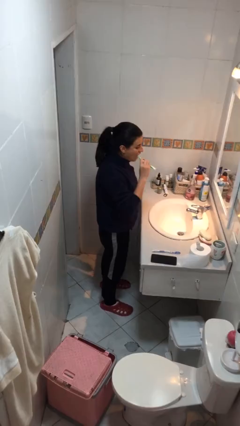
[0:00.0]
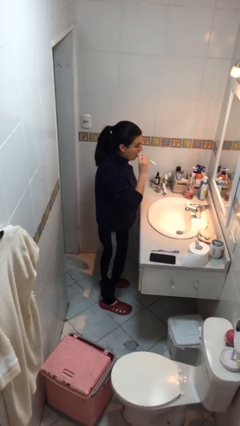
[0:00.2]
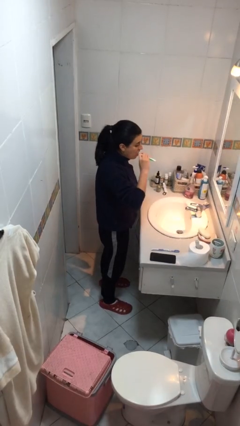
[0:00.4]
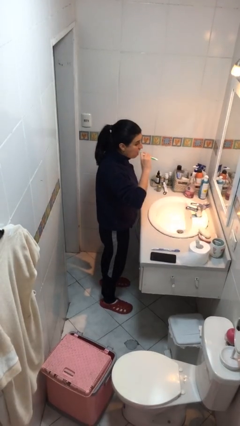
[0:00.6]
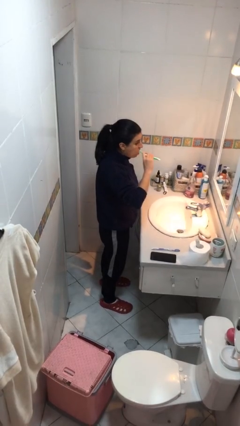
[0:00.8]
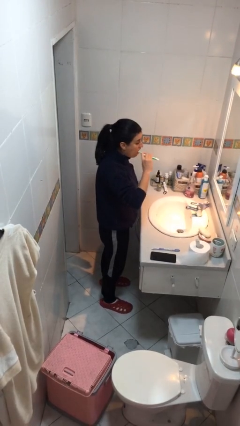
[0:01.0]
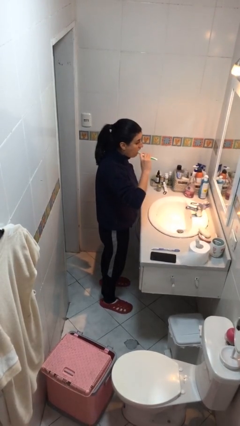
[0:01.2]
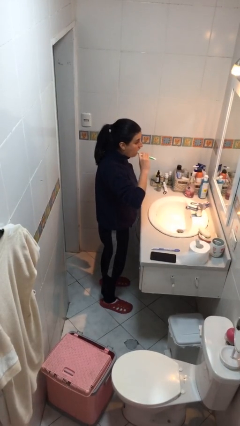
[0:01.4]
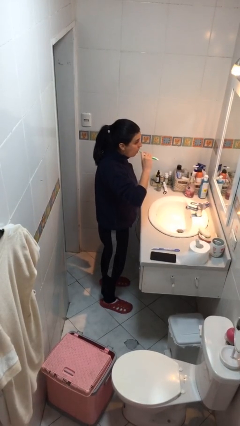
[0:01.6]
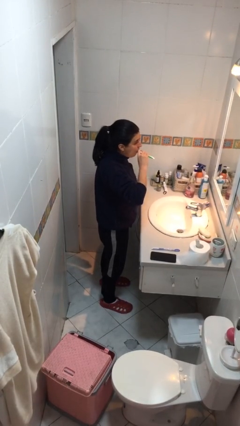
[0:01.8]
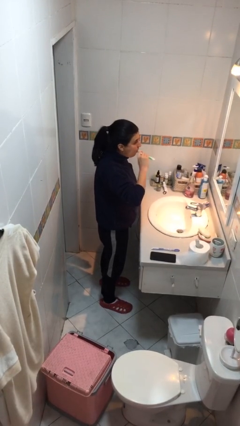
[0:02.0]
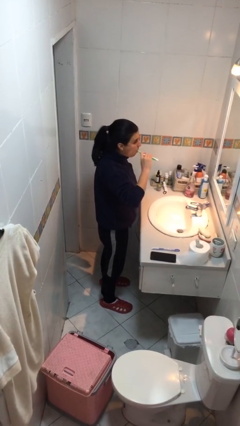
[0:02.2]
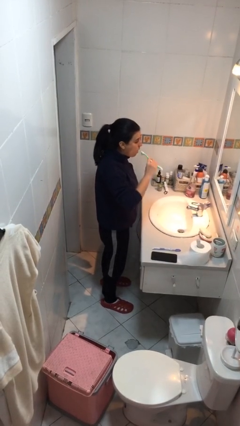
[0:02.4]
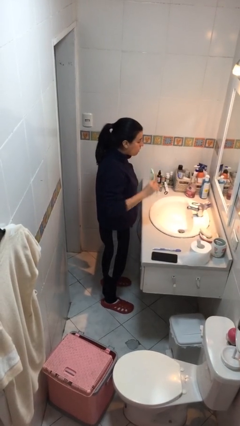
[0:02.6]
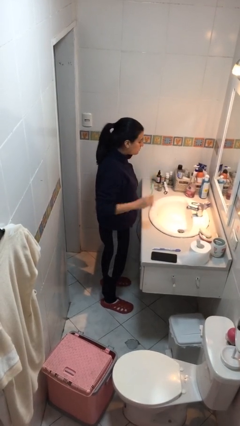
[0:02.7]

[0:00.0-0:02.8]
person brushes teeth

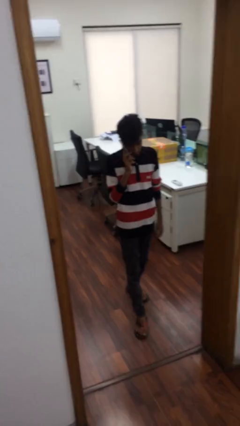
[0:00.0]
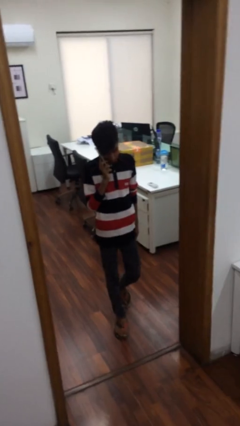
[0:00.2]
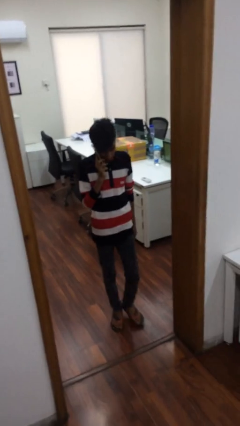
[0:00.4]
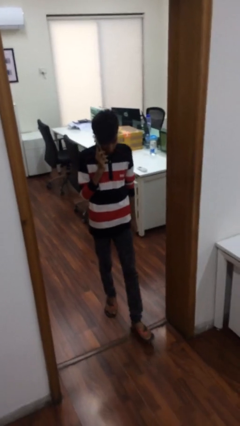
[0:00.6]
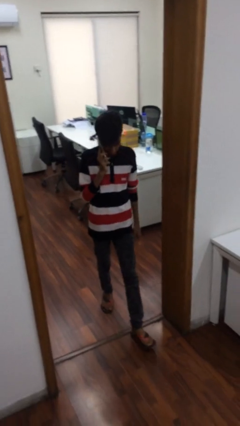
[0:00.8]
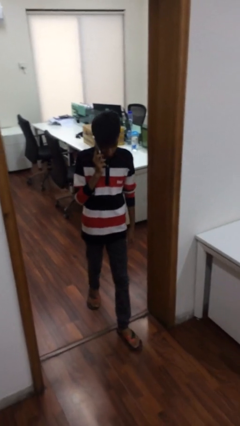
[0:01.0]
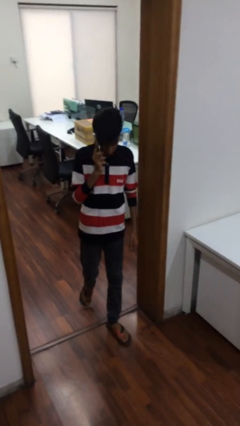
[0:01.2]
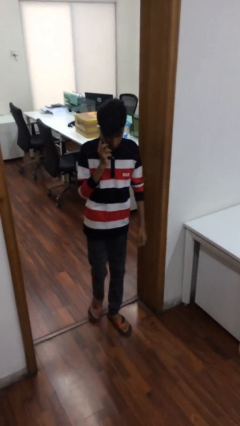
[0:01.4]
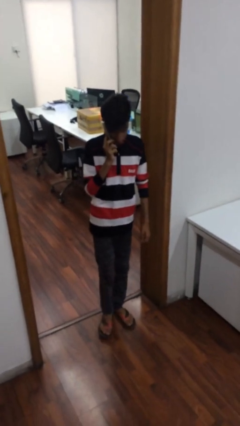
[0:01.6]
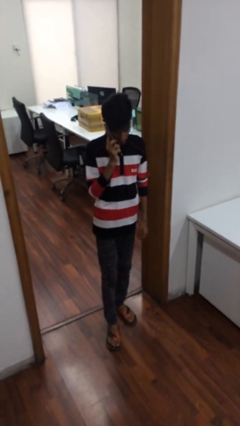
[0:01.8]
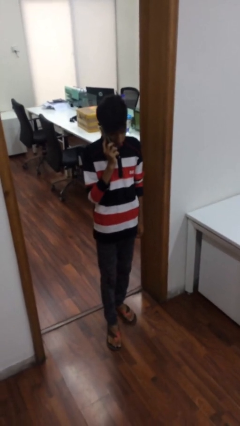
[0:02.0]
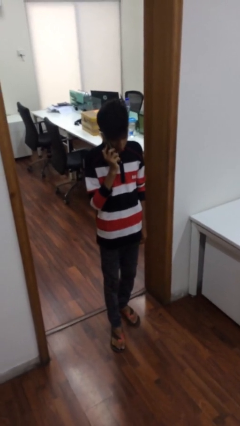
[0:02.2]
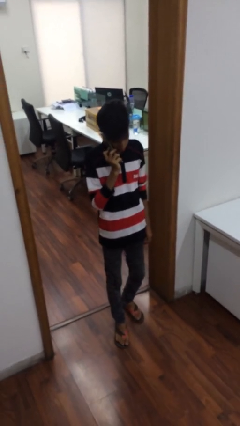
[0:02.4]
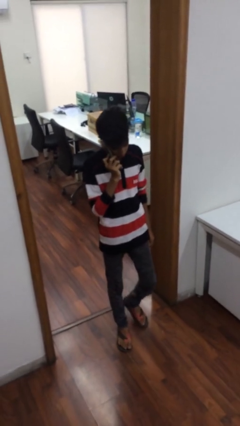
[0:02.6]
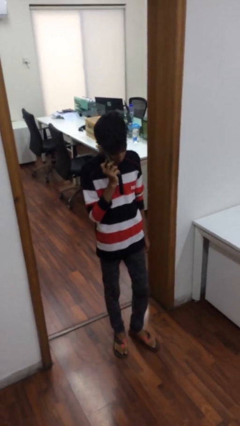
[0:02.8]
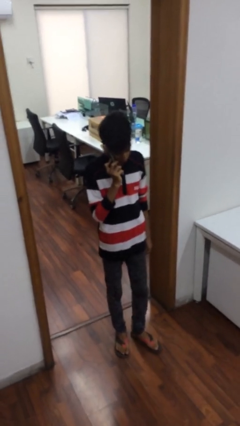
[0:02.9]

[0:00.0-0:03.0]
person enters scene through structure

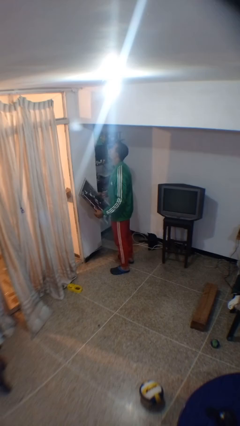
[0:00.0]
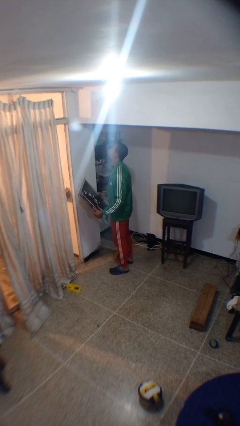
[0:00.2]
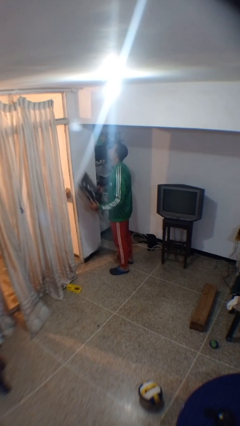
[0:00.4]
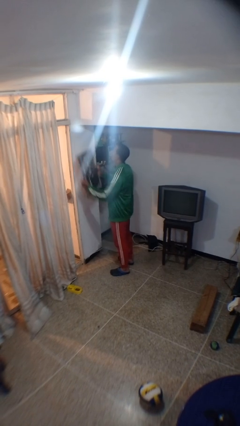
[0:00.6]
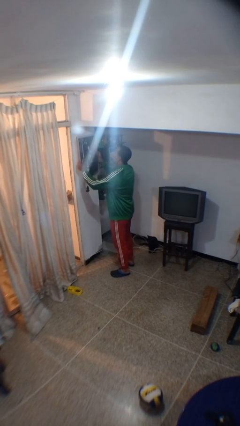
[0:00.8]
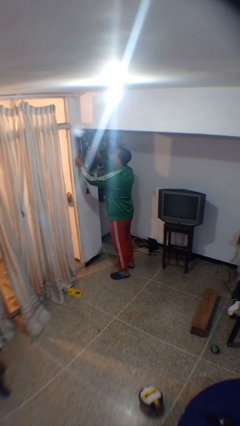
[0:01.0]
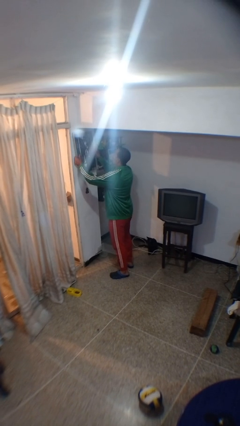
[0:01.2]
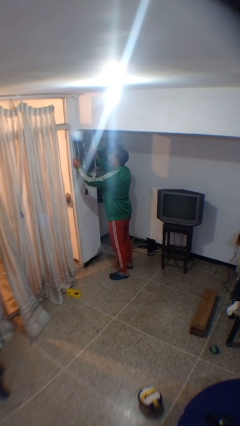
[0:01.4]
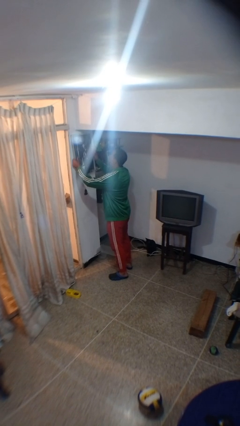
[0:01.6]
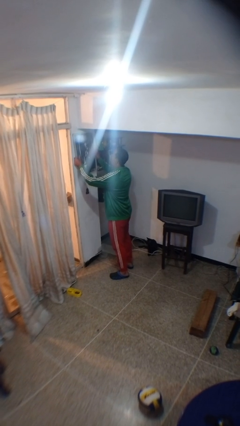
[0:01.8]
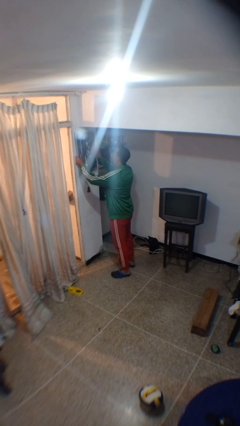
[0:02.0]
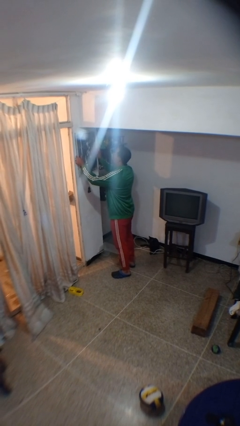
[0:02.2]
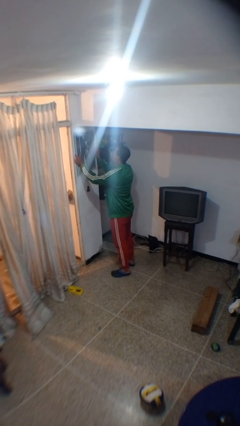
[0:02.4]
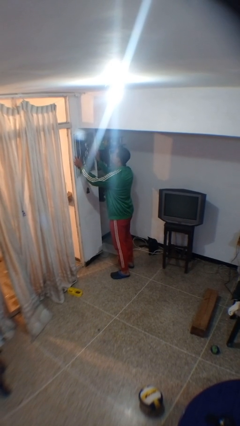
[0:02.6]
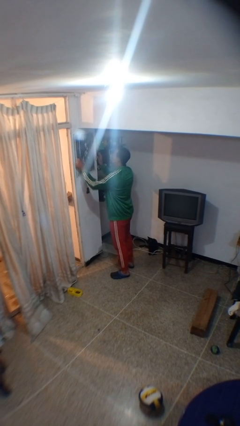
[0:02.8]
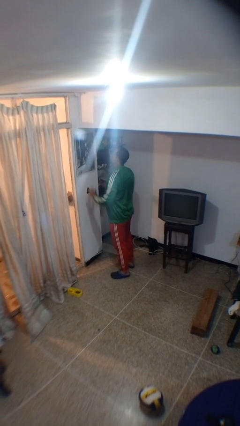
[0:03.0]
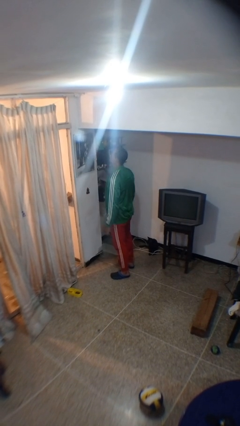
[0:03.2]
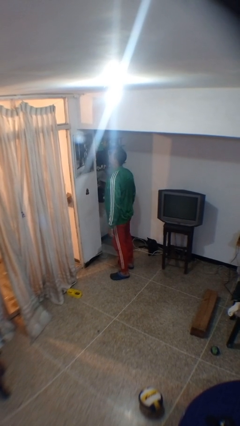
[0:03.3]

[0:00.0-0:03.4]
person puts up picture frame

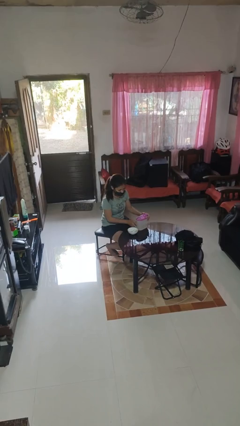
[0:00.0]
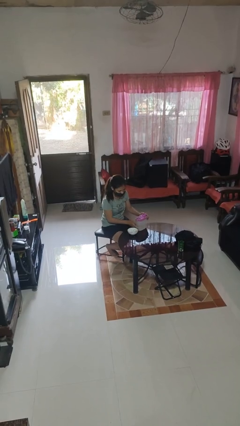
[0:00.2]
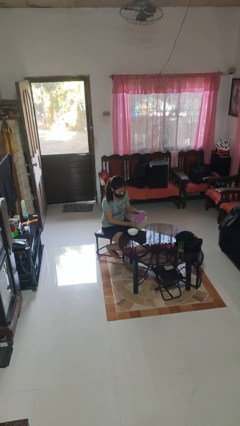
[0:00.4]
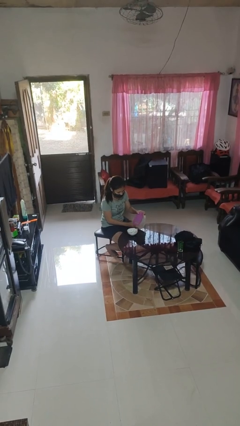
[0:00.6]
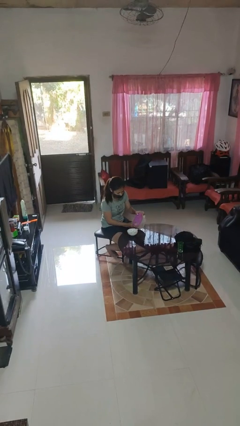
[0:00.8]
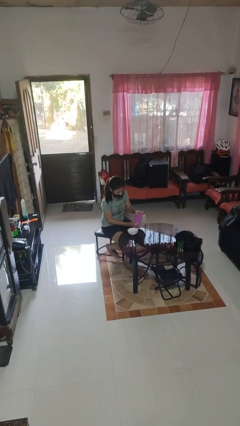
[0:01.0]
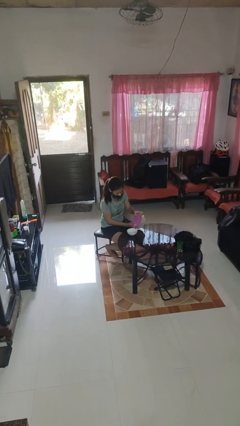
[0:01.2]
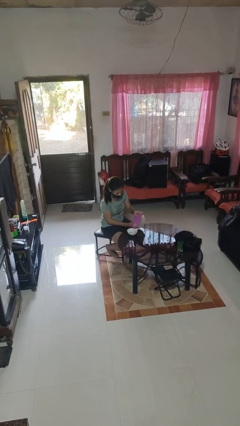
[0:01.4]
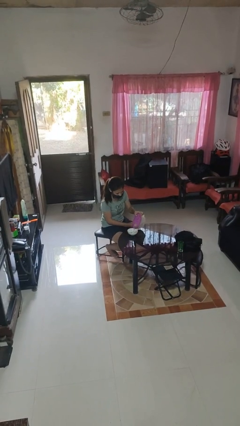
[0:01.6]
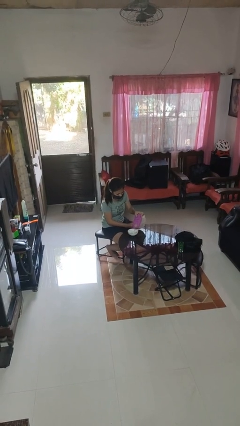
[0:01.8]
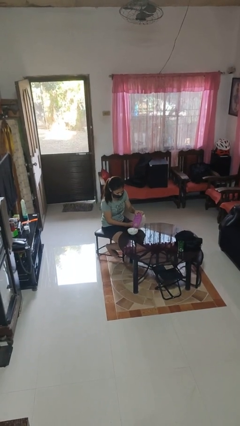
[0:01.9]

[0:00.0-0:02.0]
person pours into bowl

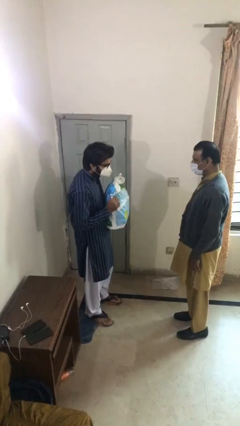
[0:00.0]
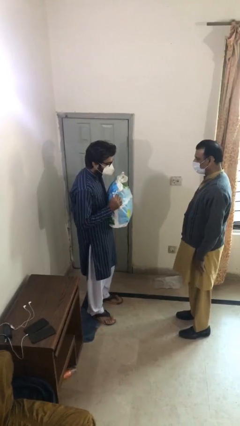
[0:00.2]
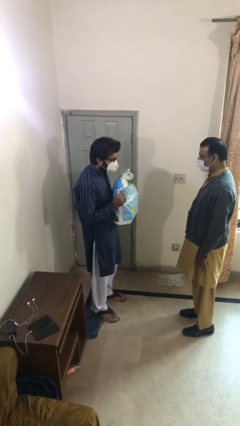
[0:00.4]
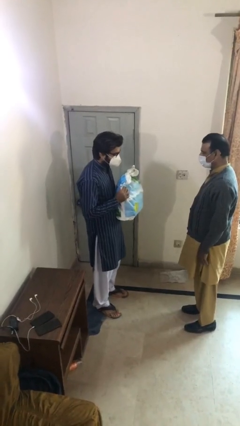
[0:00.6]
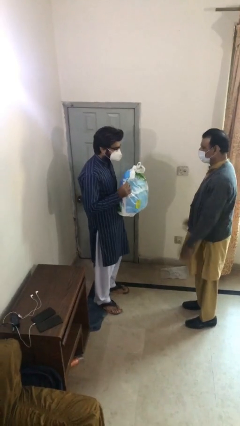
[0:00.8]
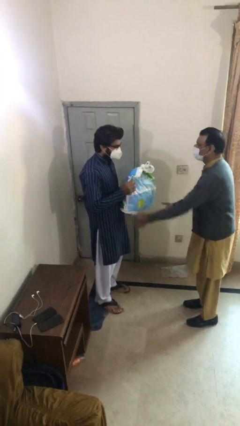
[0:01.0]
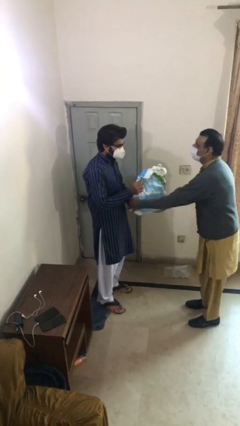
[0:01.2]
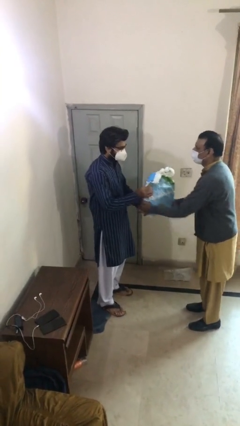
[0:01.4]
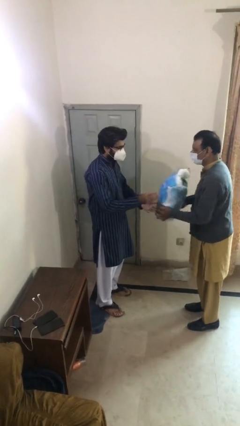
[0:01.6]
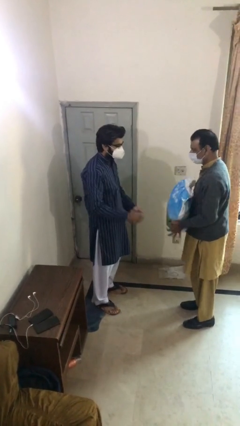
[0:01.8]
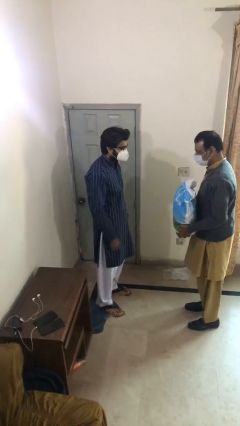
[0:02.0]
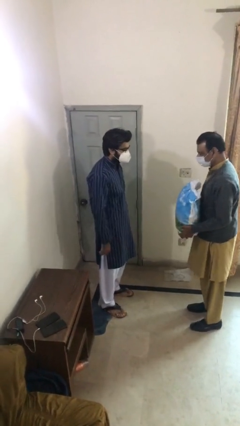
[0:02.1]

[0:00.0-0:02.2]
person transfers object to person

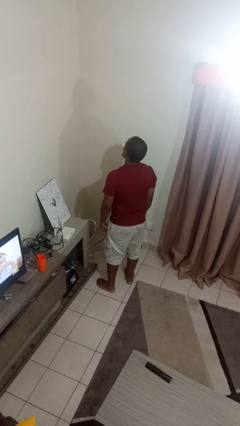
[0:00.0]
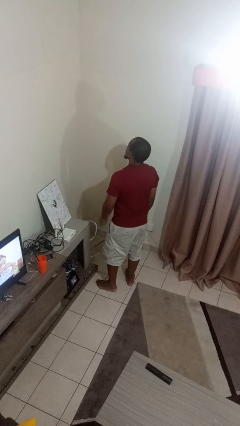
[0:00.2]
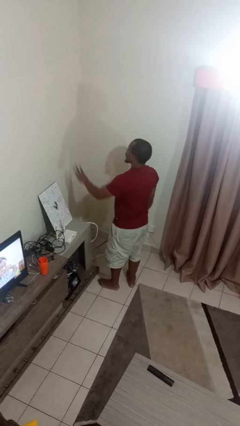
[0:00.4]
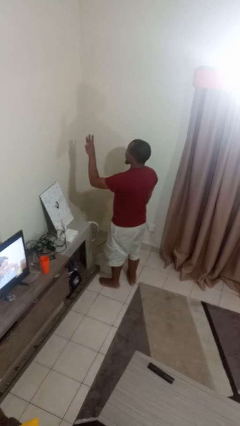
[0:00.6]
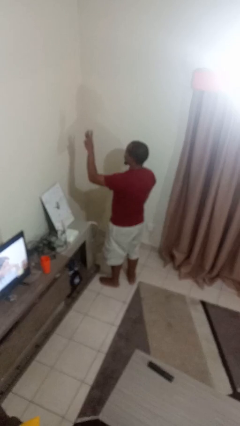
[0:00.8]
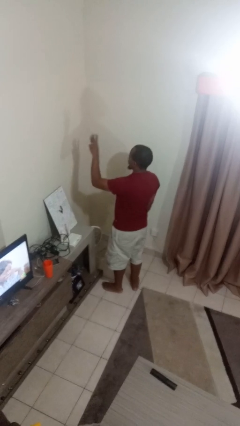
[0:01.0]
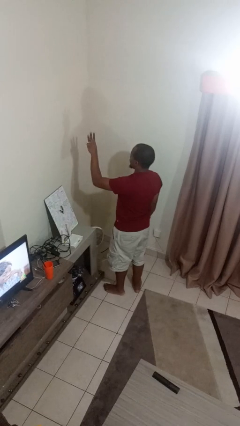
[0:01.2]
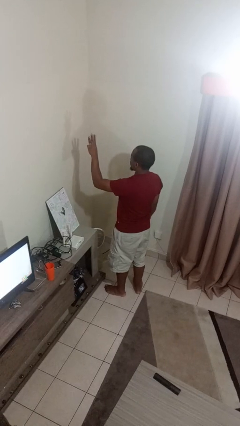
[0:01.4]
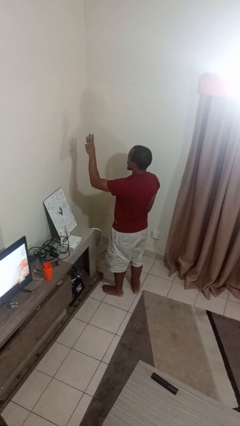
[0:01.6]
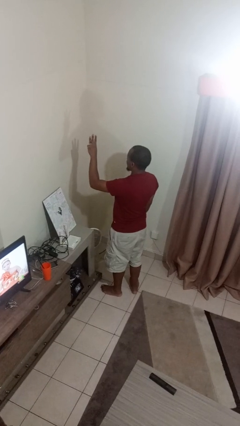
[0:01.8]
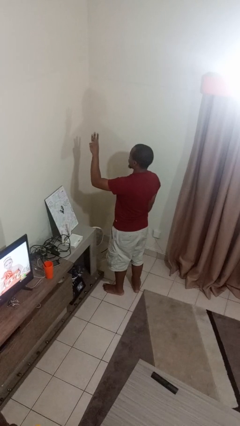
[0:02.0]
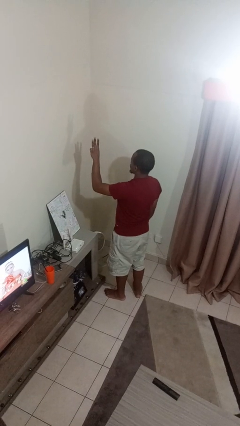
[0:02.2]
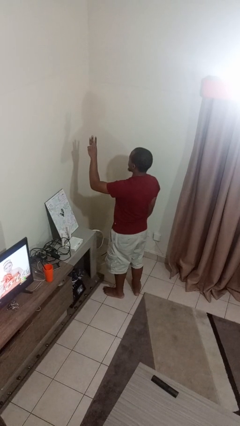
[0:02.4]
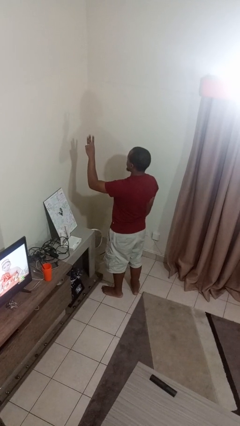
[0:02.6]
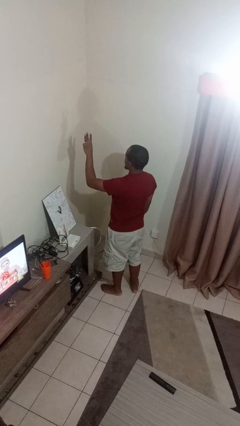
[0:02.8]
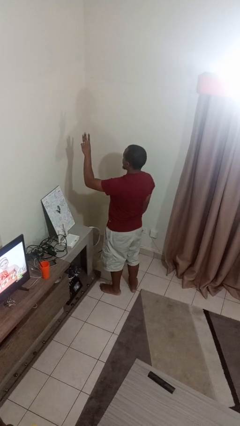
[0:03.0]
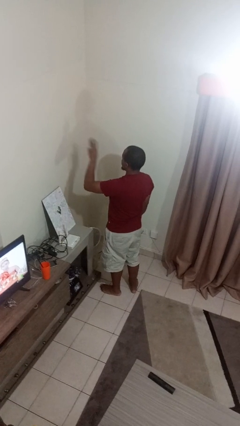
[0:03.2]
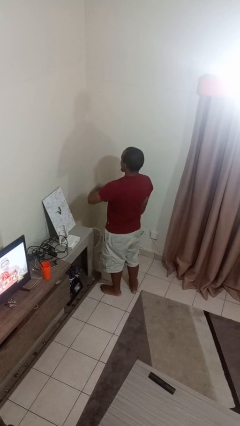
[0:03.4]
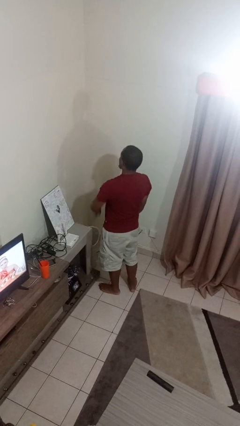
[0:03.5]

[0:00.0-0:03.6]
person gestures number three

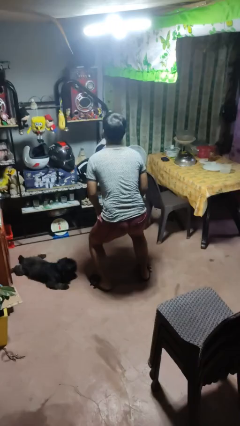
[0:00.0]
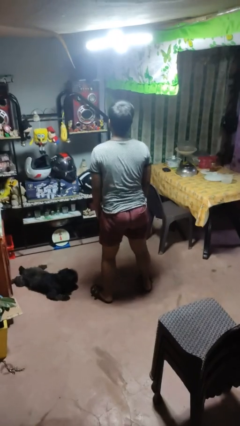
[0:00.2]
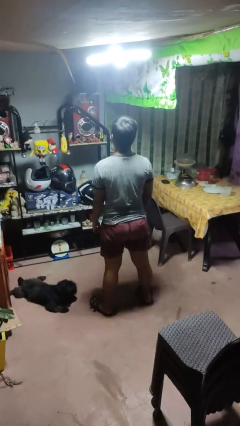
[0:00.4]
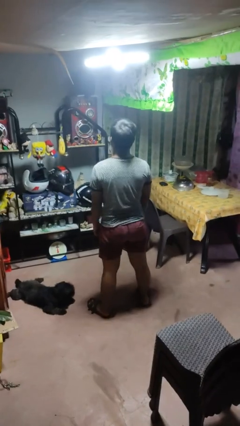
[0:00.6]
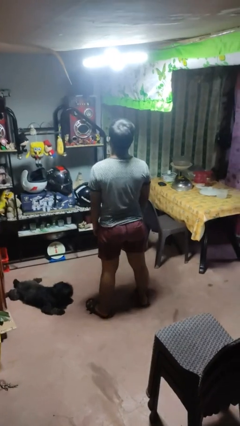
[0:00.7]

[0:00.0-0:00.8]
person stands up
